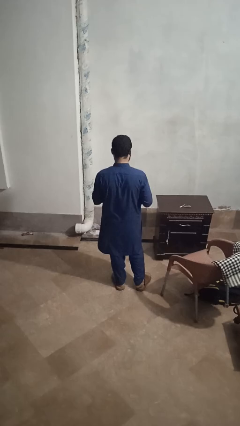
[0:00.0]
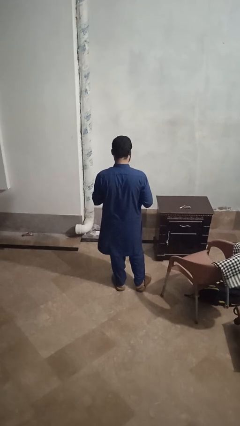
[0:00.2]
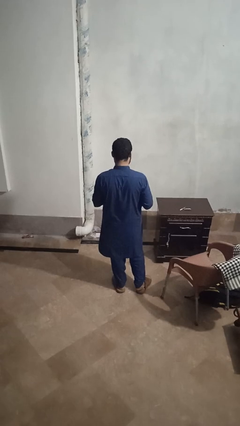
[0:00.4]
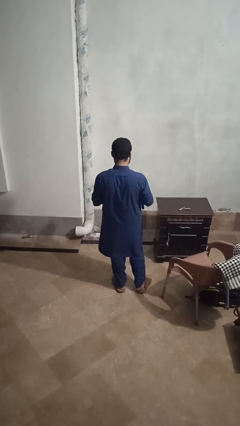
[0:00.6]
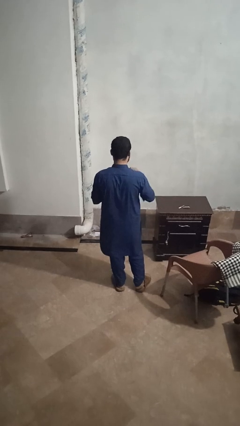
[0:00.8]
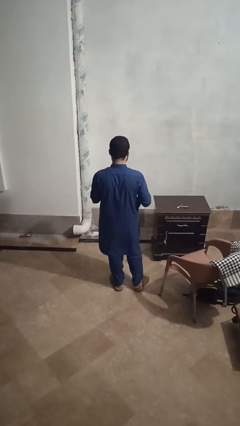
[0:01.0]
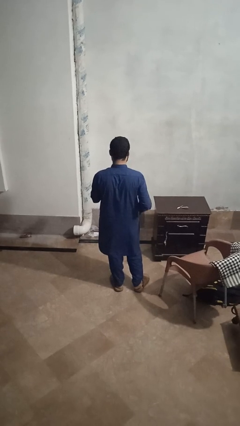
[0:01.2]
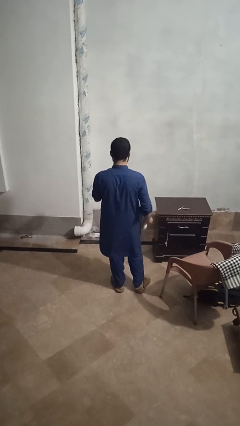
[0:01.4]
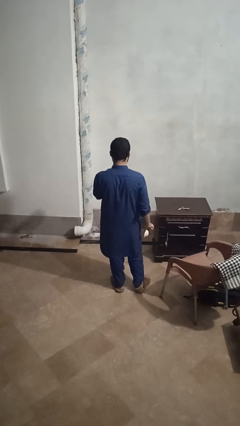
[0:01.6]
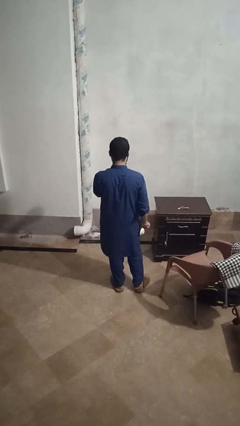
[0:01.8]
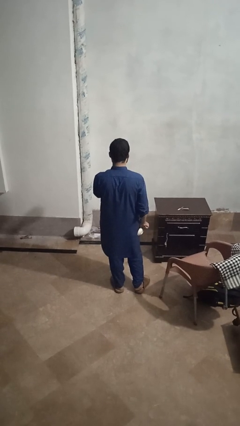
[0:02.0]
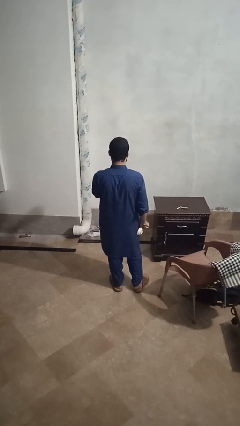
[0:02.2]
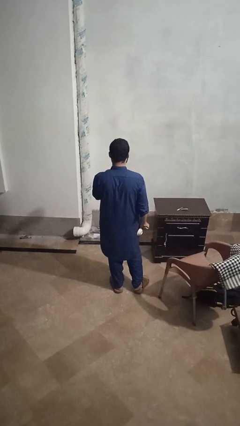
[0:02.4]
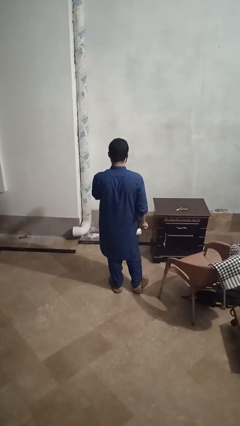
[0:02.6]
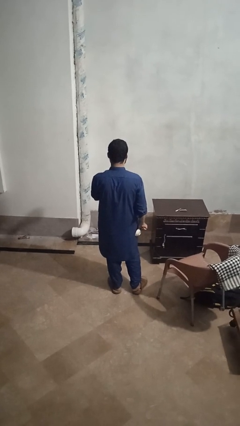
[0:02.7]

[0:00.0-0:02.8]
person opens beverage can

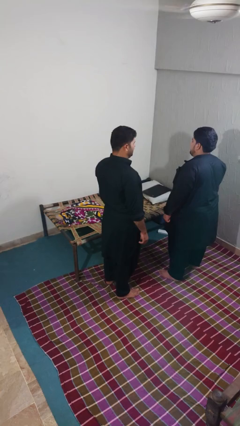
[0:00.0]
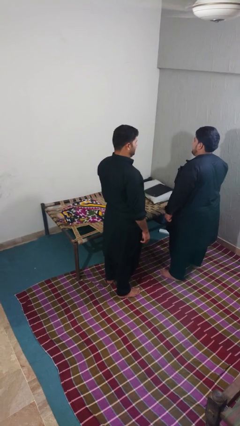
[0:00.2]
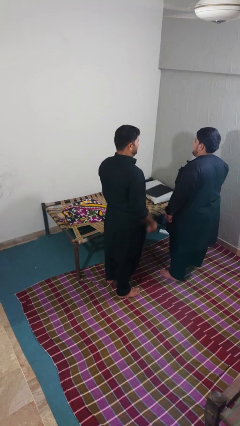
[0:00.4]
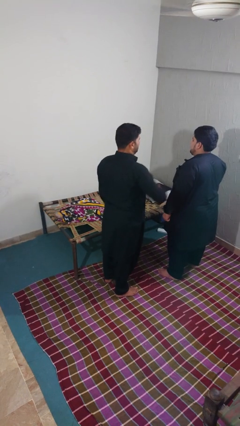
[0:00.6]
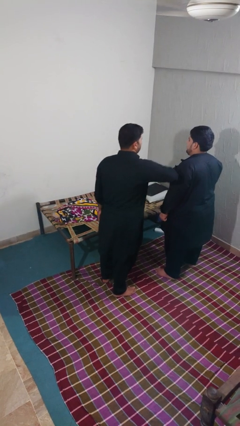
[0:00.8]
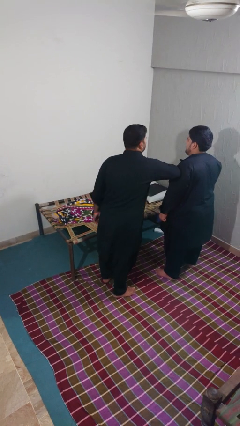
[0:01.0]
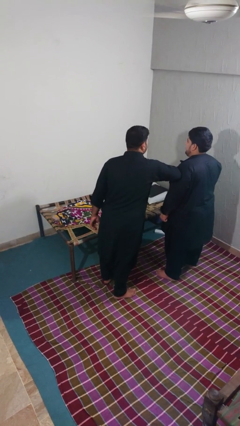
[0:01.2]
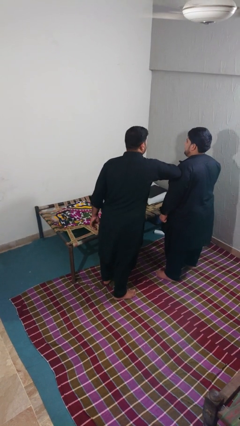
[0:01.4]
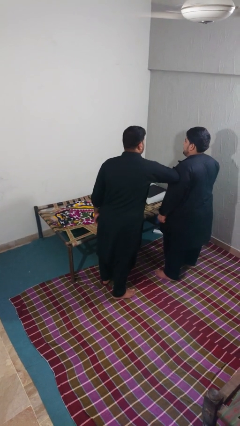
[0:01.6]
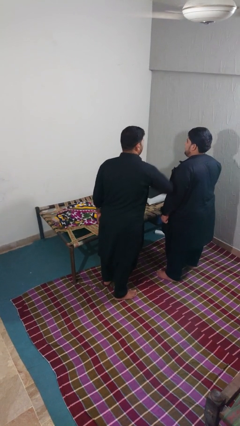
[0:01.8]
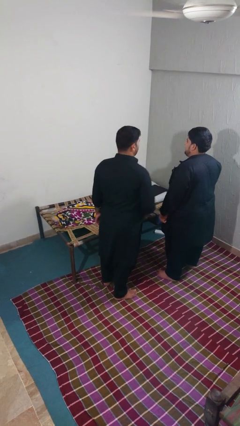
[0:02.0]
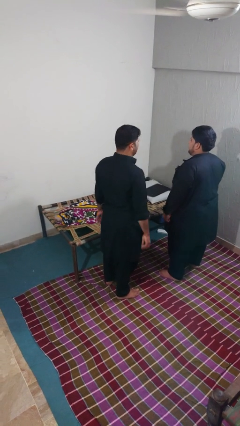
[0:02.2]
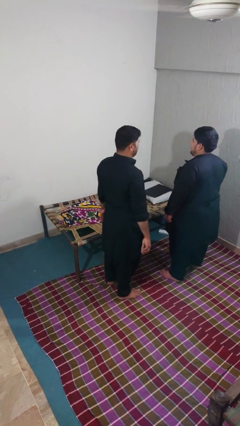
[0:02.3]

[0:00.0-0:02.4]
person nudges person with elbow

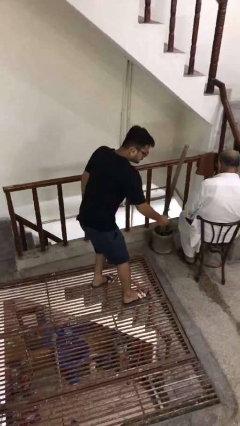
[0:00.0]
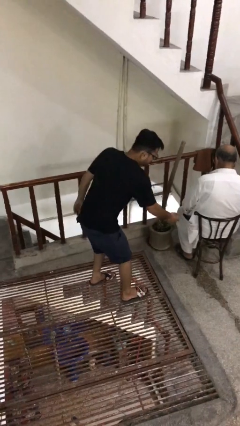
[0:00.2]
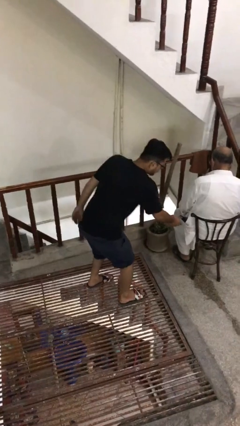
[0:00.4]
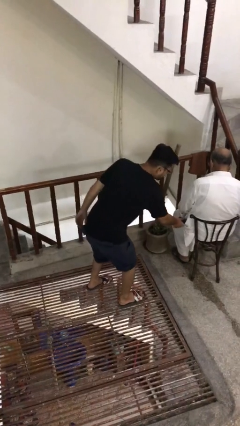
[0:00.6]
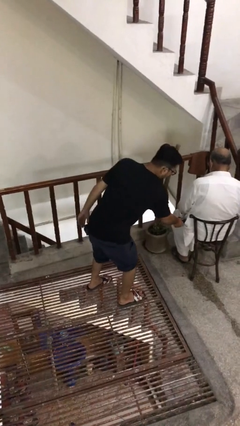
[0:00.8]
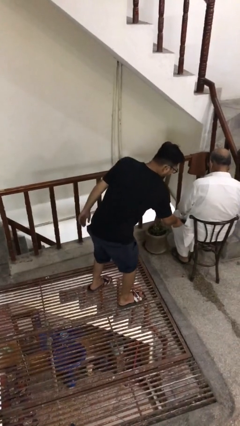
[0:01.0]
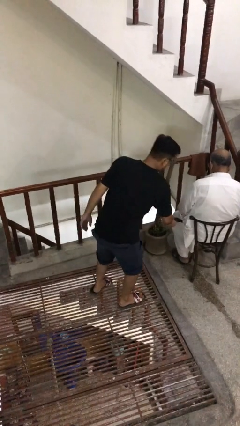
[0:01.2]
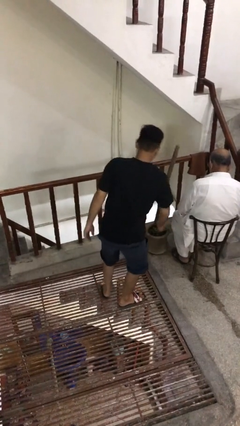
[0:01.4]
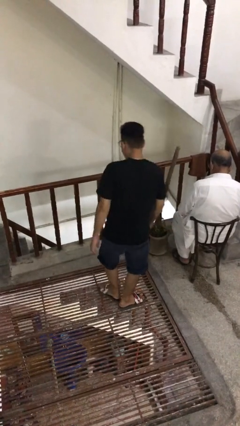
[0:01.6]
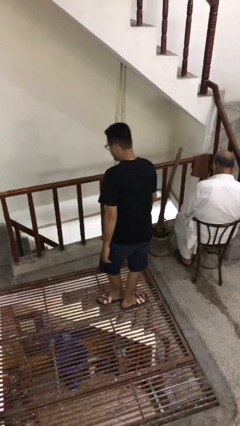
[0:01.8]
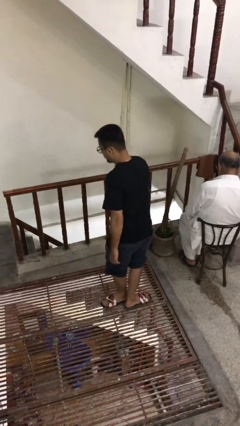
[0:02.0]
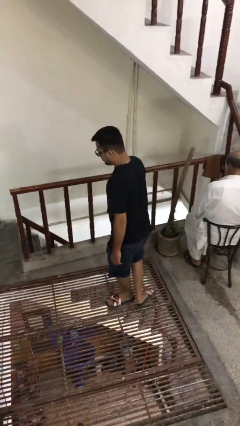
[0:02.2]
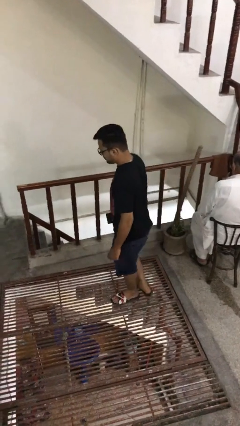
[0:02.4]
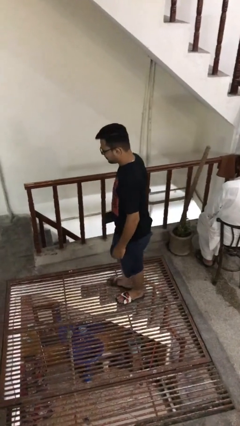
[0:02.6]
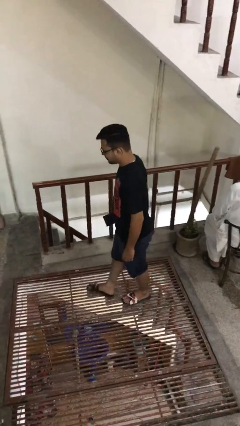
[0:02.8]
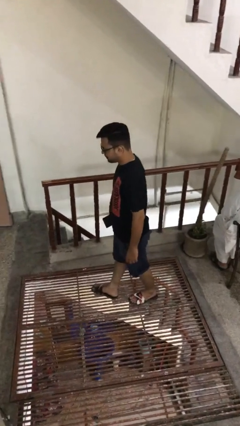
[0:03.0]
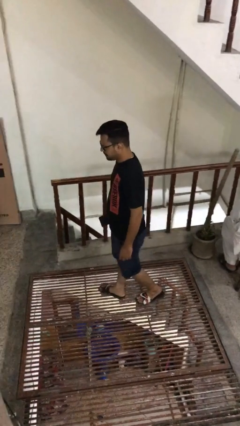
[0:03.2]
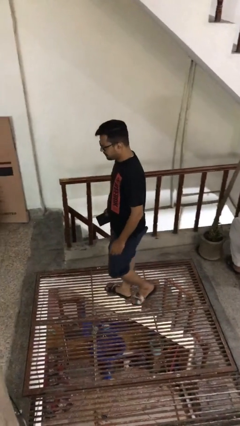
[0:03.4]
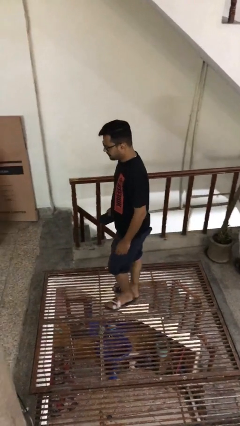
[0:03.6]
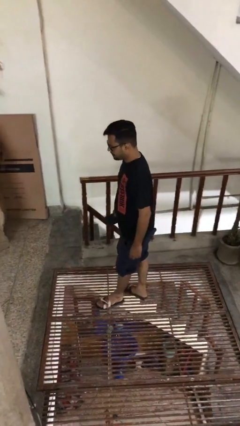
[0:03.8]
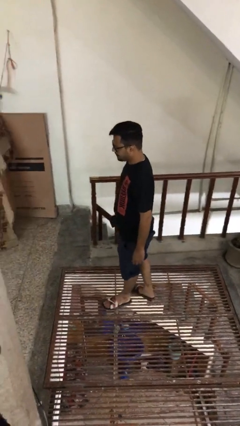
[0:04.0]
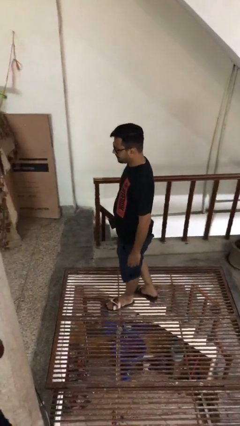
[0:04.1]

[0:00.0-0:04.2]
person steals object from person

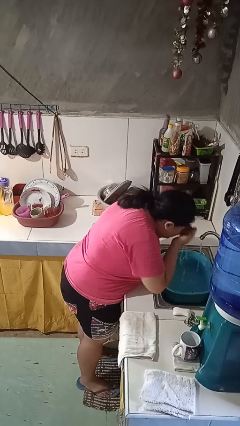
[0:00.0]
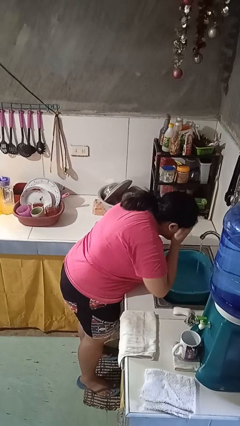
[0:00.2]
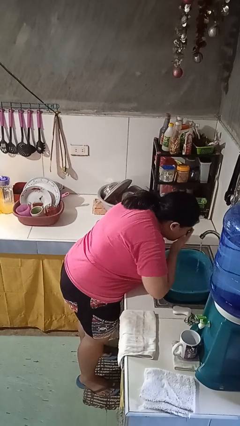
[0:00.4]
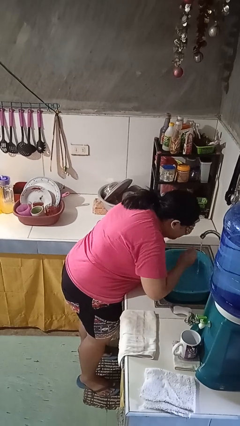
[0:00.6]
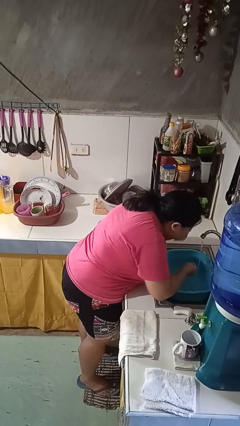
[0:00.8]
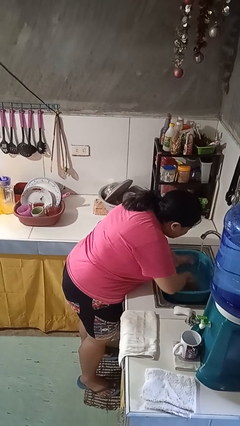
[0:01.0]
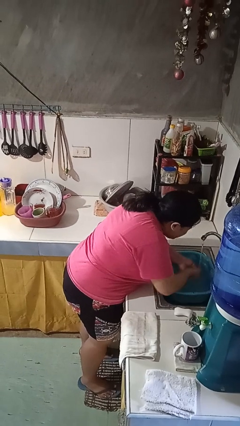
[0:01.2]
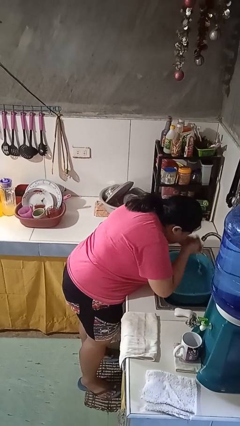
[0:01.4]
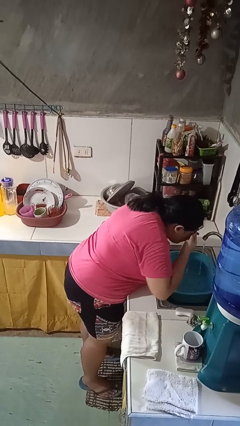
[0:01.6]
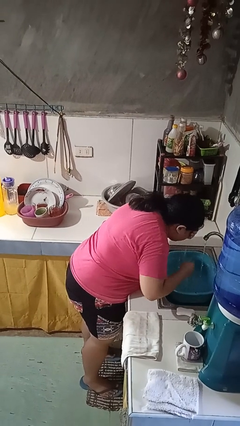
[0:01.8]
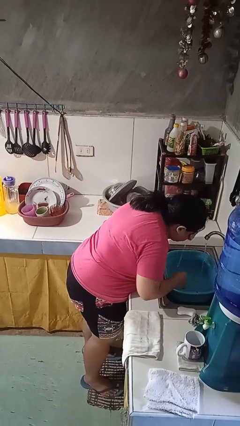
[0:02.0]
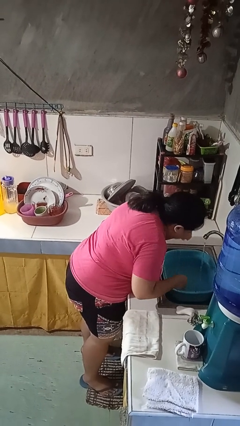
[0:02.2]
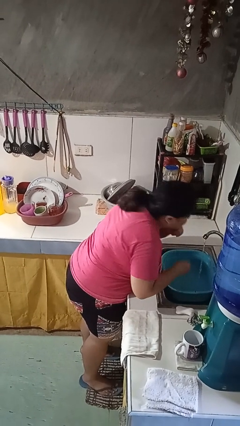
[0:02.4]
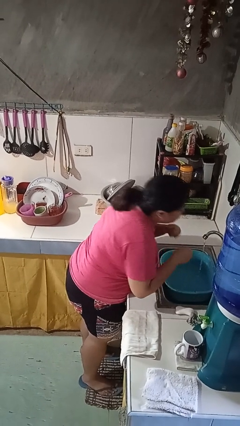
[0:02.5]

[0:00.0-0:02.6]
person washes face

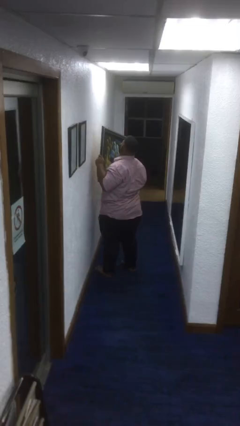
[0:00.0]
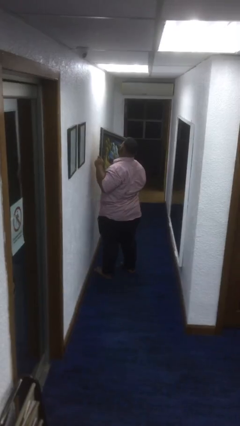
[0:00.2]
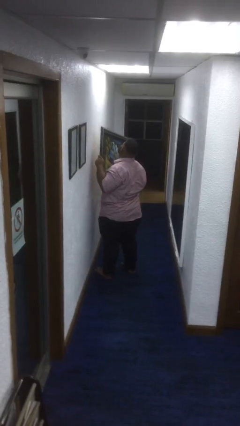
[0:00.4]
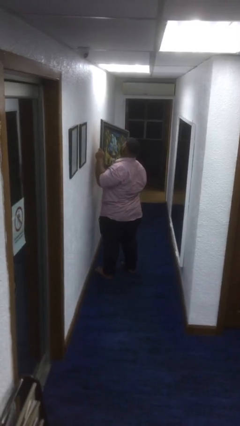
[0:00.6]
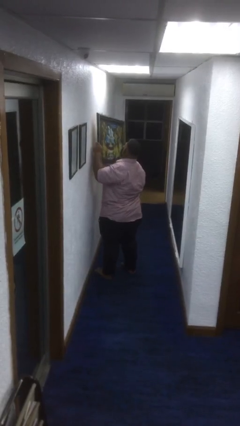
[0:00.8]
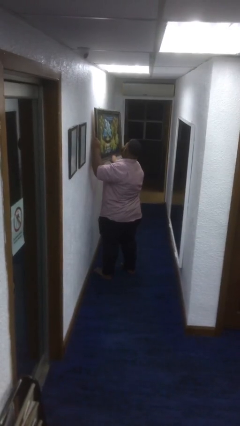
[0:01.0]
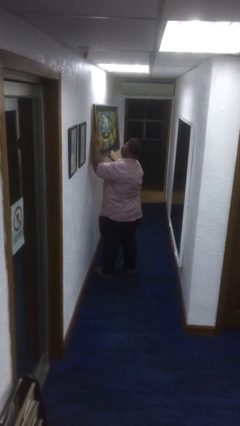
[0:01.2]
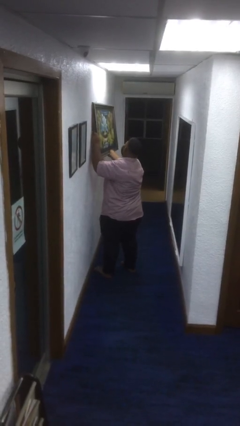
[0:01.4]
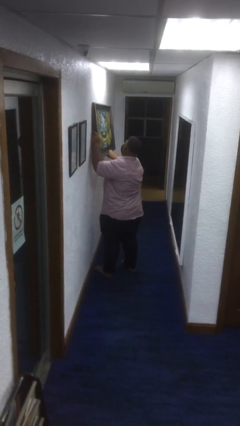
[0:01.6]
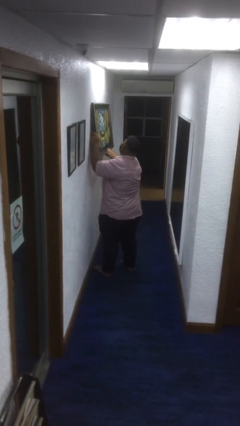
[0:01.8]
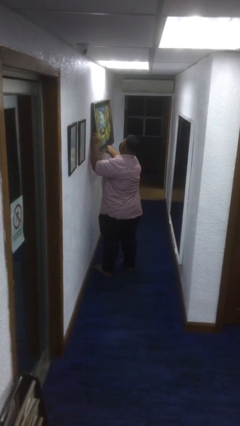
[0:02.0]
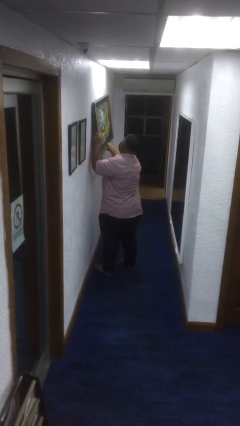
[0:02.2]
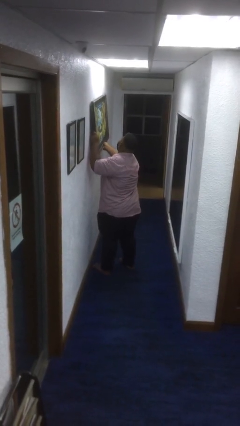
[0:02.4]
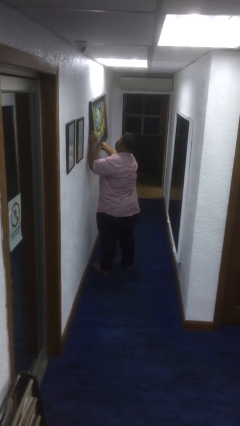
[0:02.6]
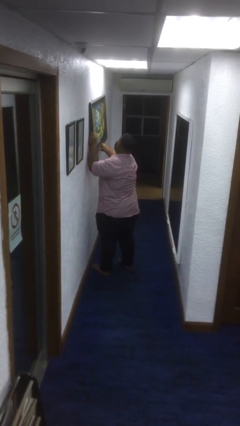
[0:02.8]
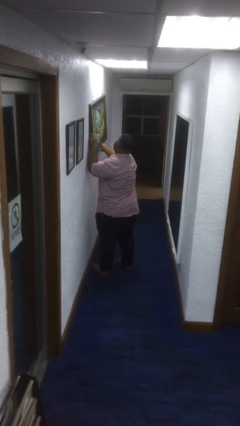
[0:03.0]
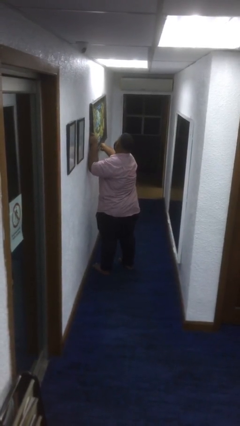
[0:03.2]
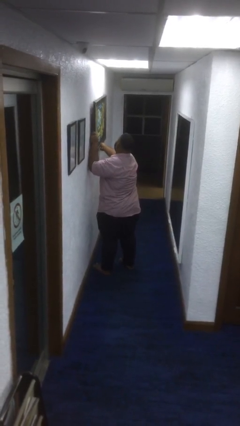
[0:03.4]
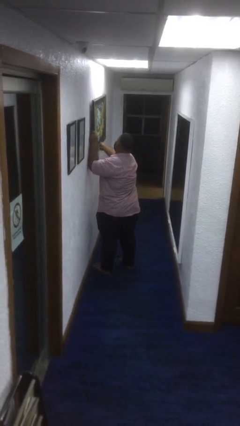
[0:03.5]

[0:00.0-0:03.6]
person puts up picture frame

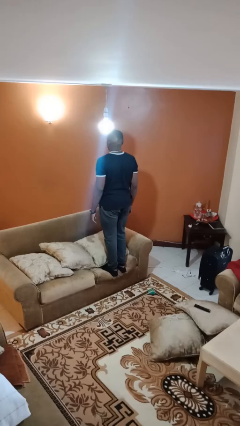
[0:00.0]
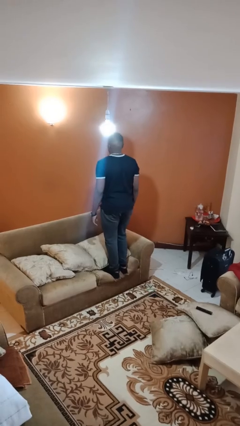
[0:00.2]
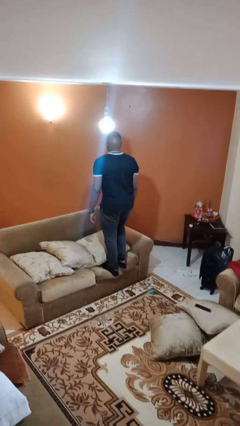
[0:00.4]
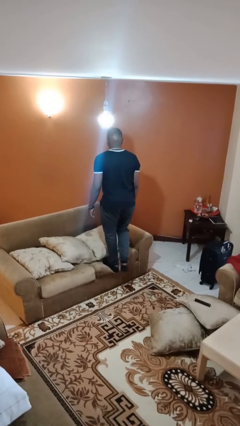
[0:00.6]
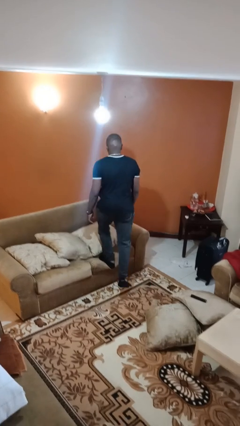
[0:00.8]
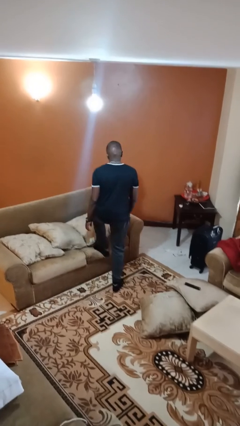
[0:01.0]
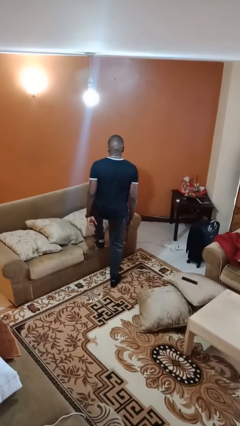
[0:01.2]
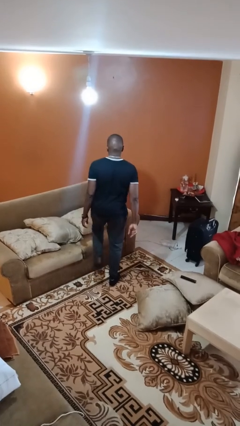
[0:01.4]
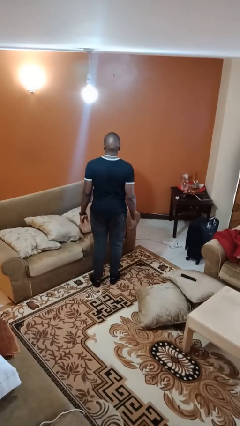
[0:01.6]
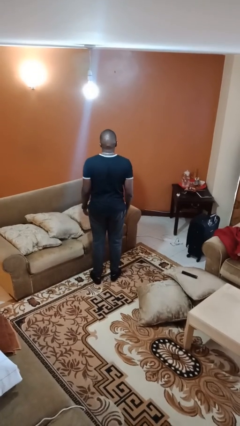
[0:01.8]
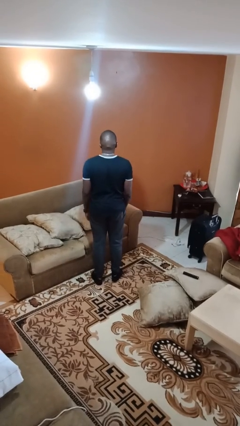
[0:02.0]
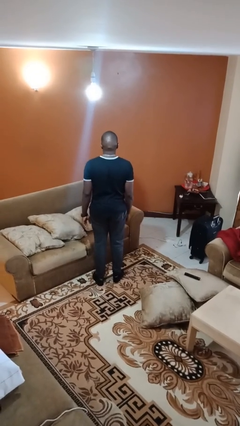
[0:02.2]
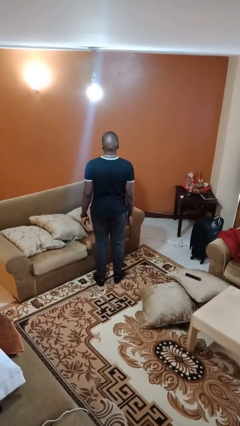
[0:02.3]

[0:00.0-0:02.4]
person climbs off couch
